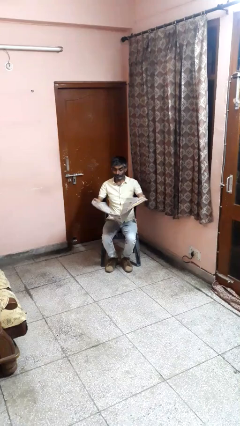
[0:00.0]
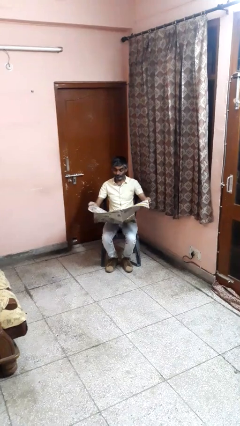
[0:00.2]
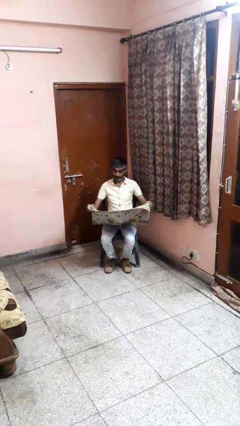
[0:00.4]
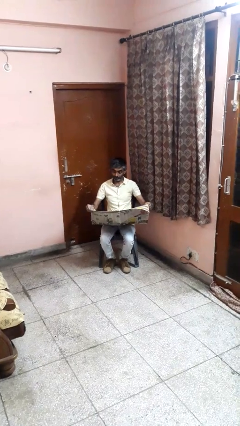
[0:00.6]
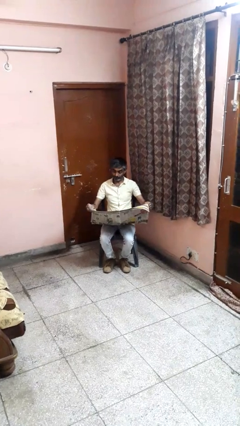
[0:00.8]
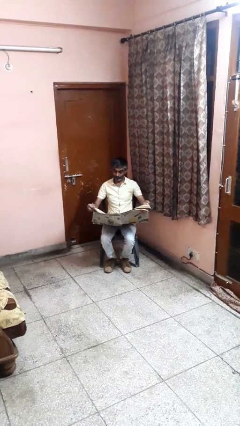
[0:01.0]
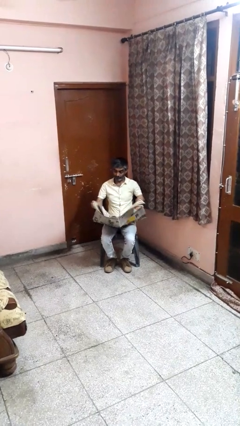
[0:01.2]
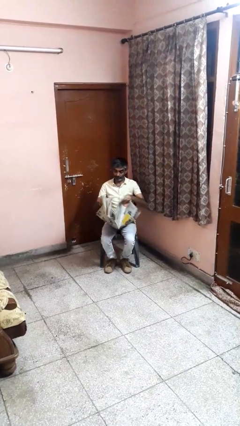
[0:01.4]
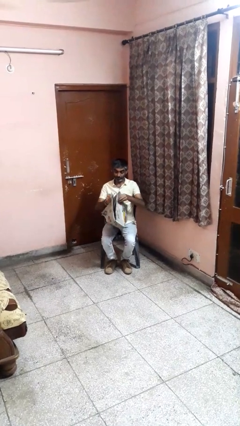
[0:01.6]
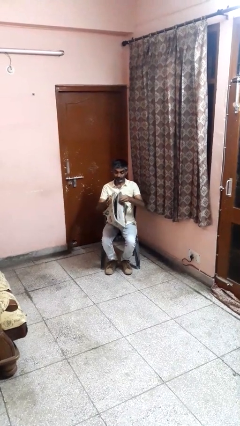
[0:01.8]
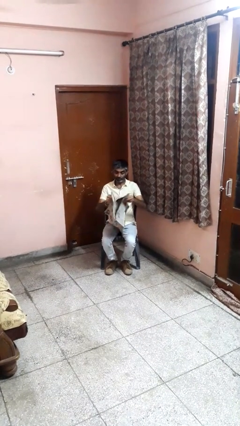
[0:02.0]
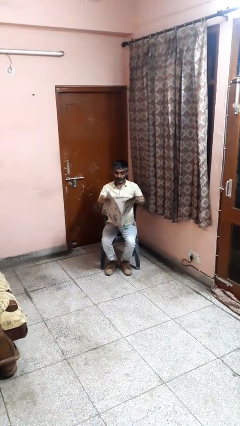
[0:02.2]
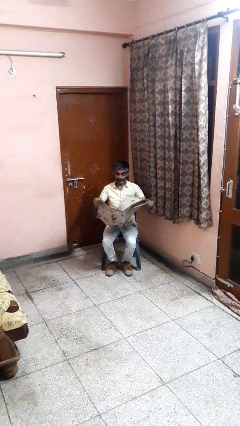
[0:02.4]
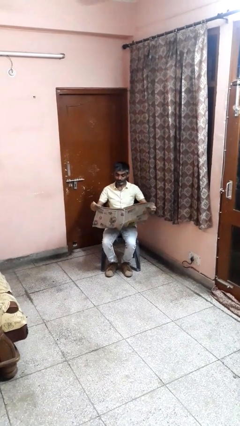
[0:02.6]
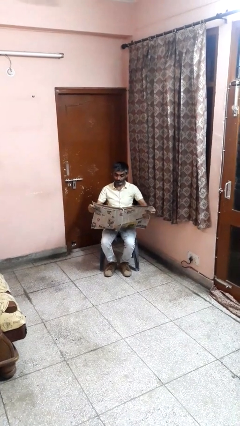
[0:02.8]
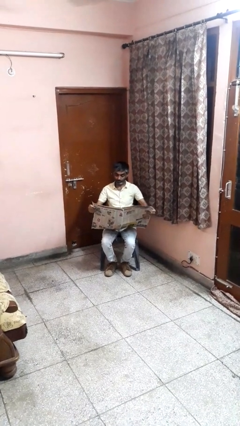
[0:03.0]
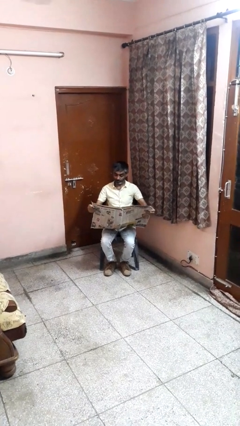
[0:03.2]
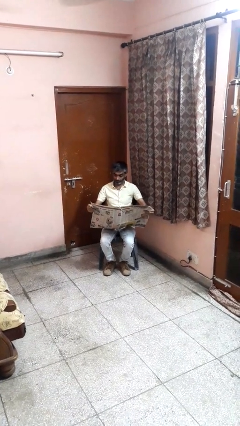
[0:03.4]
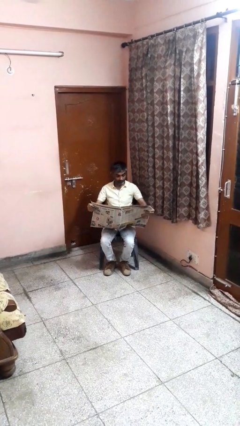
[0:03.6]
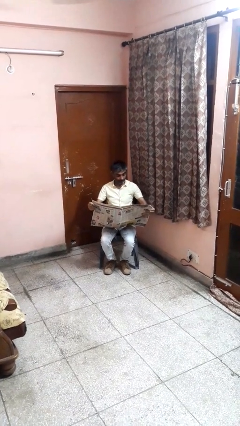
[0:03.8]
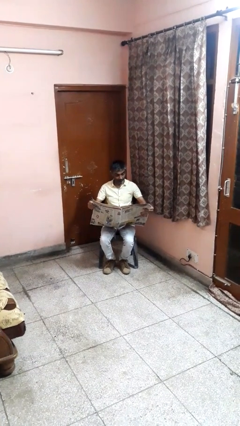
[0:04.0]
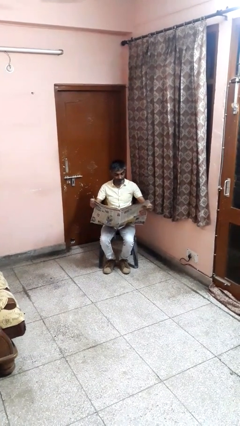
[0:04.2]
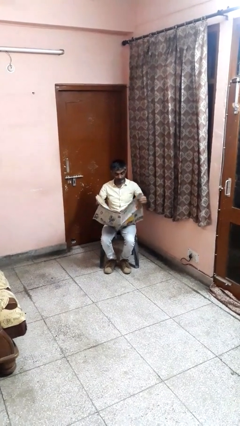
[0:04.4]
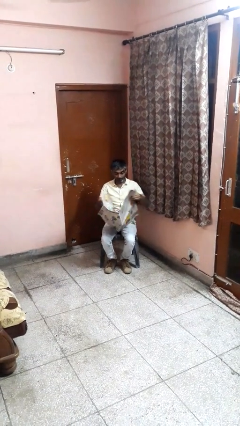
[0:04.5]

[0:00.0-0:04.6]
person reads newspaper

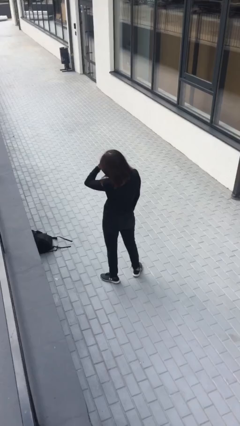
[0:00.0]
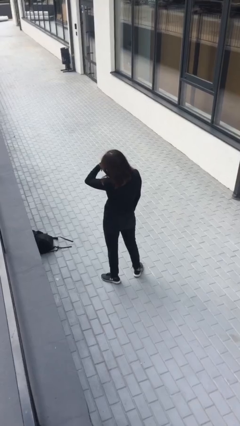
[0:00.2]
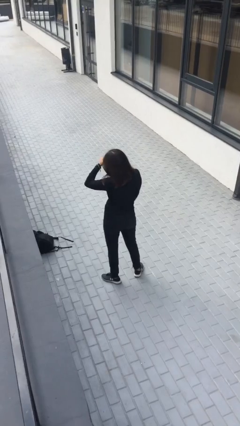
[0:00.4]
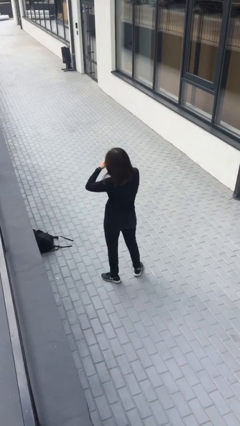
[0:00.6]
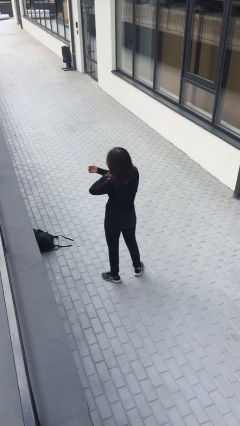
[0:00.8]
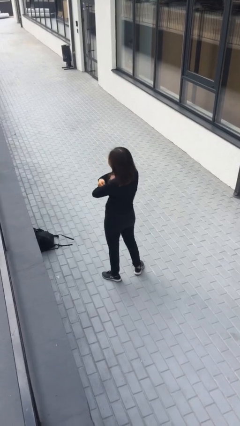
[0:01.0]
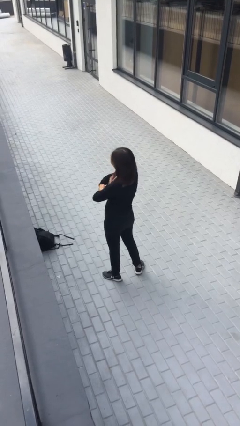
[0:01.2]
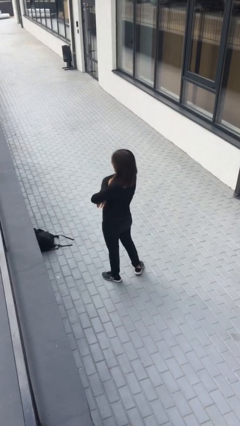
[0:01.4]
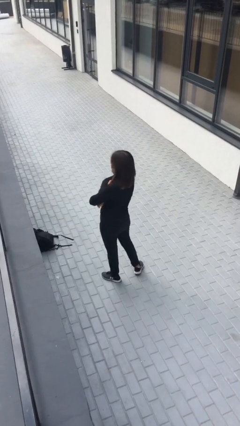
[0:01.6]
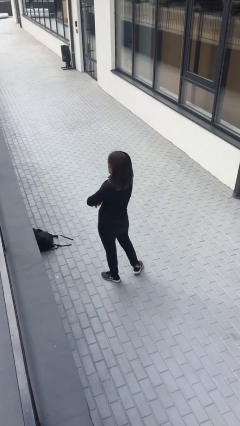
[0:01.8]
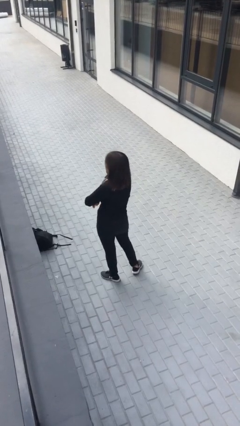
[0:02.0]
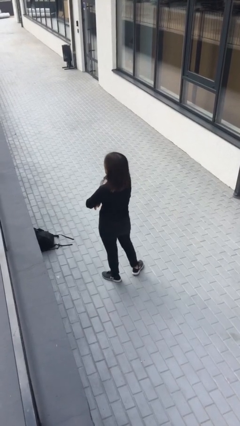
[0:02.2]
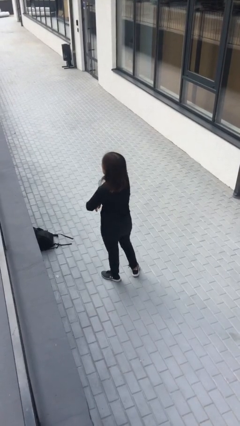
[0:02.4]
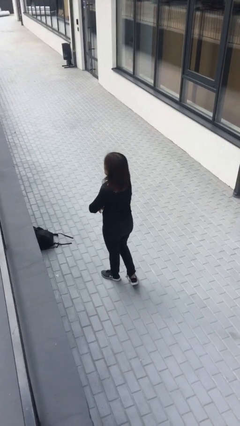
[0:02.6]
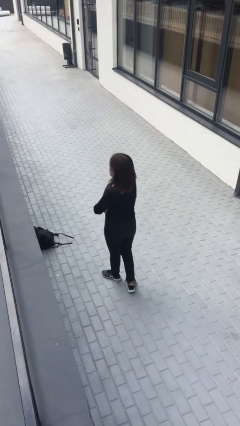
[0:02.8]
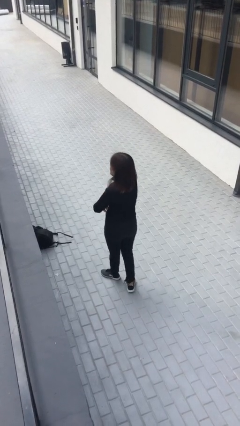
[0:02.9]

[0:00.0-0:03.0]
person crosses arms

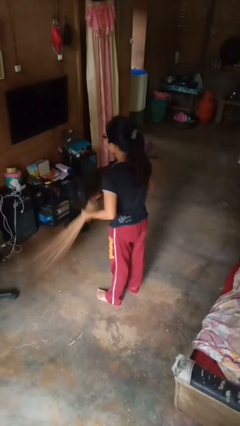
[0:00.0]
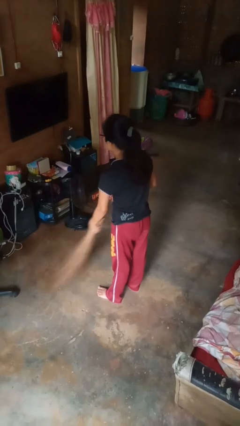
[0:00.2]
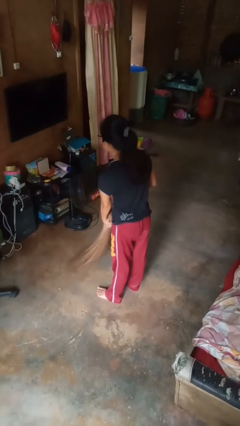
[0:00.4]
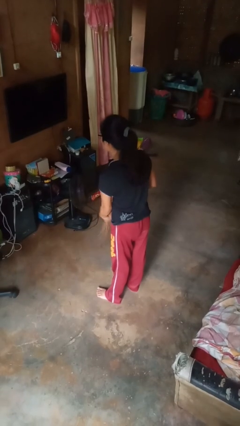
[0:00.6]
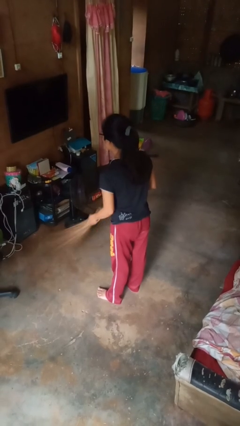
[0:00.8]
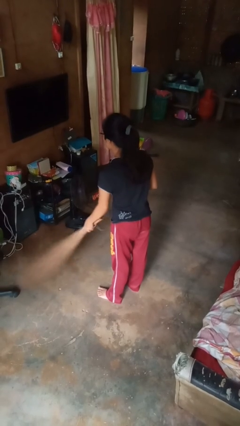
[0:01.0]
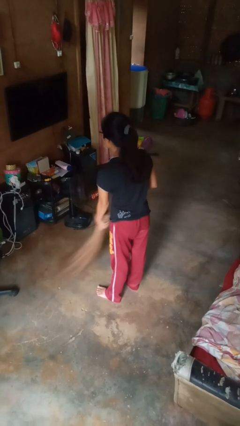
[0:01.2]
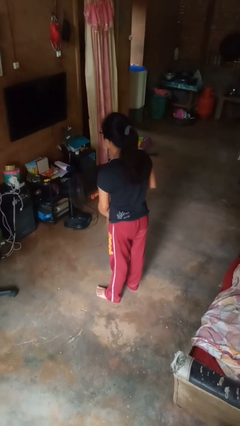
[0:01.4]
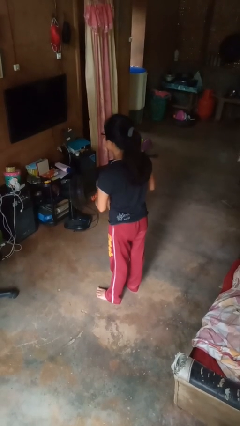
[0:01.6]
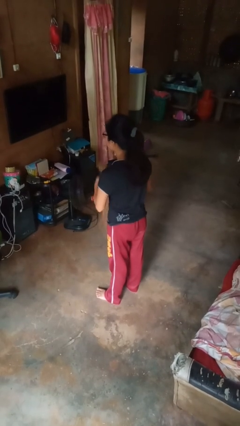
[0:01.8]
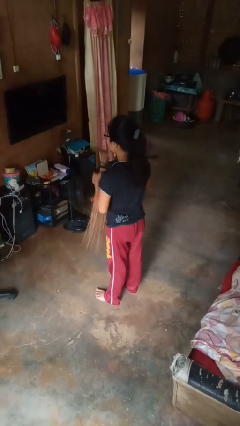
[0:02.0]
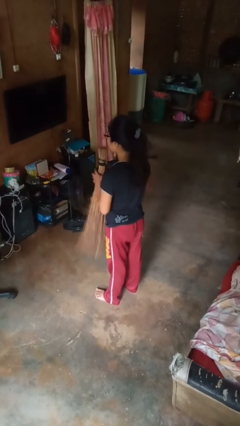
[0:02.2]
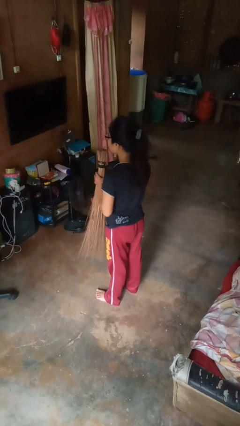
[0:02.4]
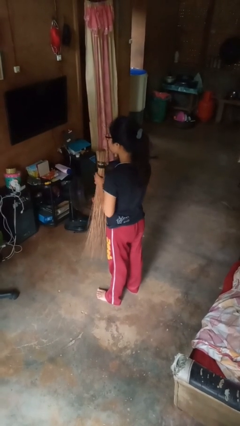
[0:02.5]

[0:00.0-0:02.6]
person sweeps floor

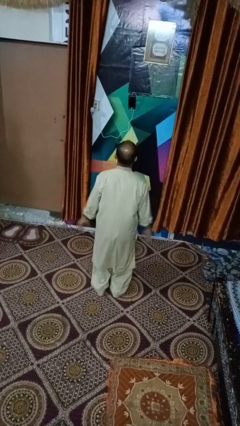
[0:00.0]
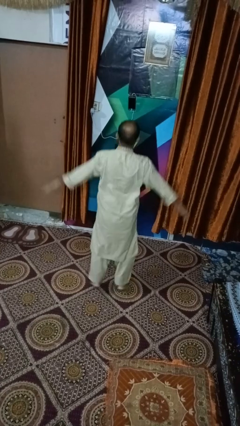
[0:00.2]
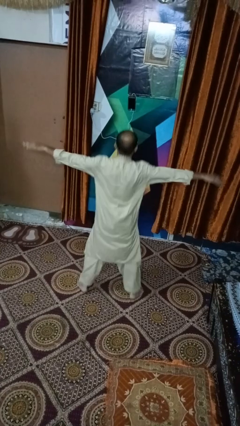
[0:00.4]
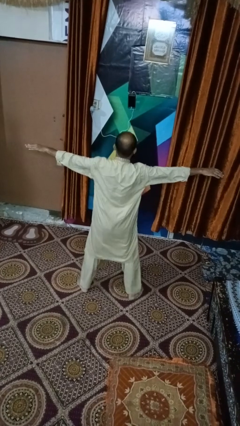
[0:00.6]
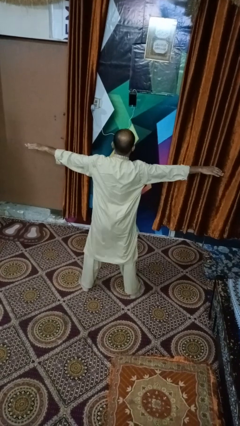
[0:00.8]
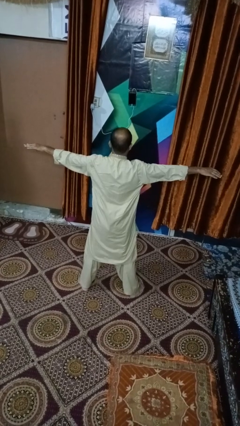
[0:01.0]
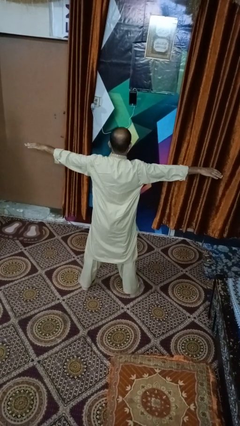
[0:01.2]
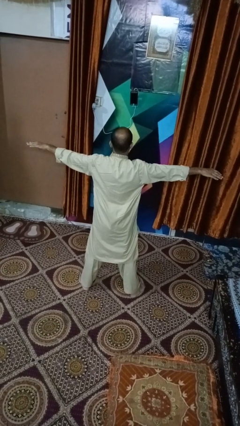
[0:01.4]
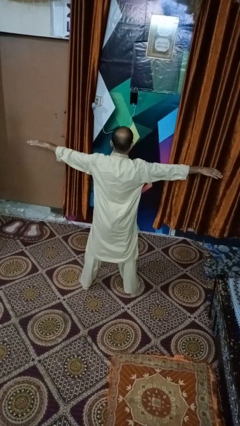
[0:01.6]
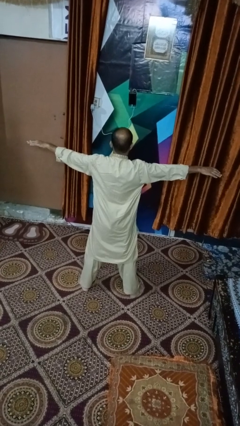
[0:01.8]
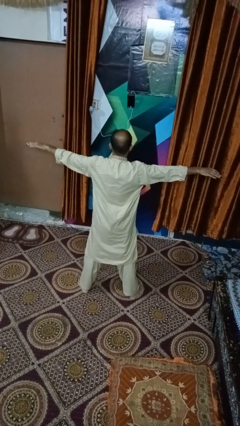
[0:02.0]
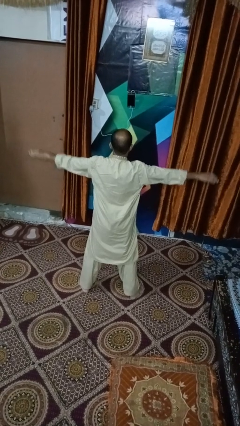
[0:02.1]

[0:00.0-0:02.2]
person exercises with jumping jacks

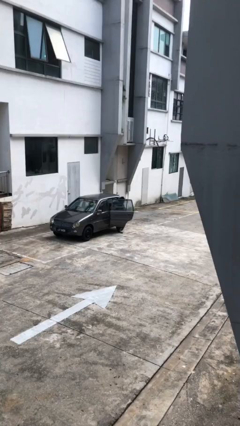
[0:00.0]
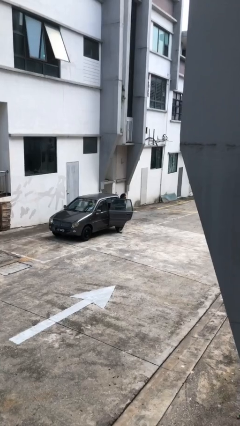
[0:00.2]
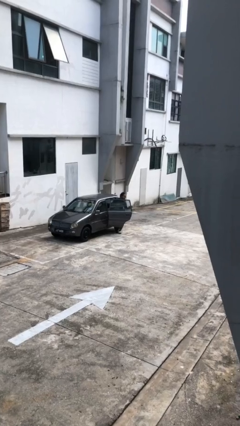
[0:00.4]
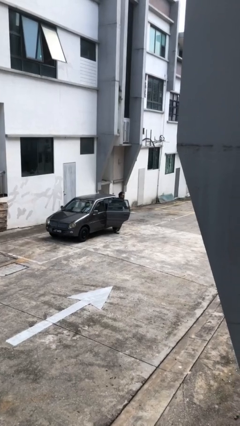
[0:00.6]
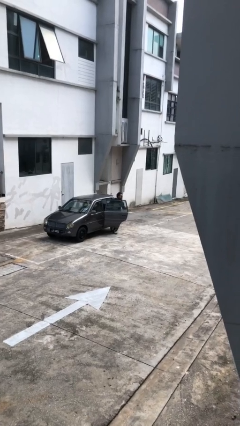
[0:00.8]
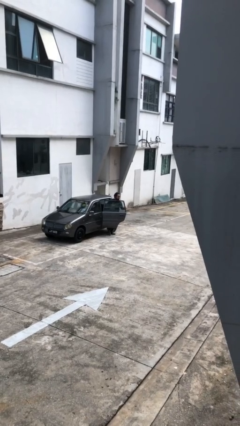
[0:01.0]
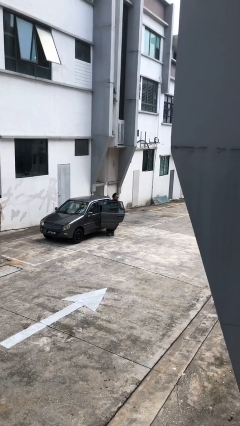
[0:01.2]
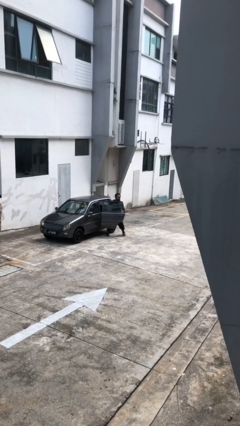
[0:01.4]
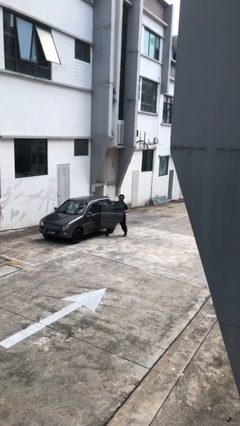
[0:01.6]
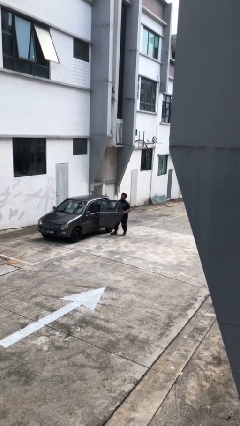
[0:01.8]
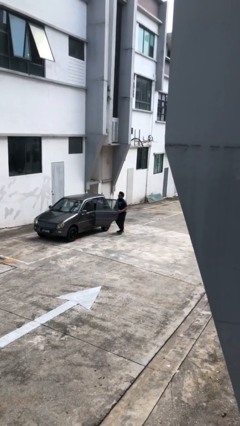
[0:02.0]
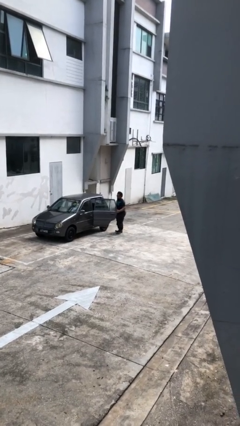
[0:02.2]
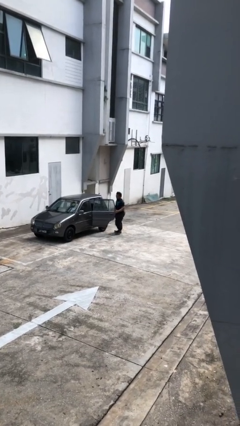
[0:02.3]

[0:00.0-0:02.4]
person exits car

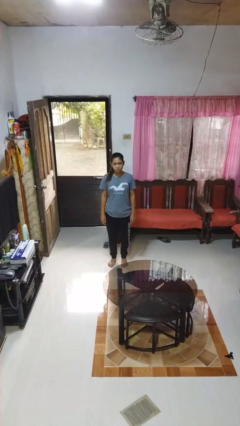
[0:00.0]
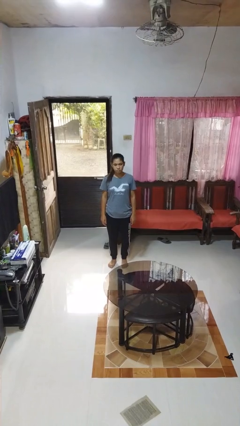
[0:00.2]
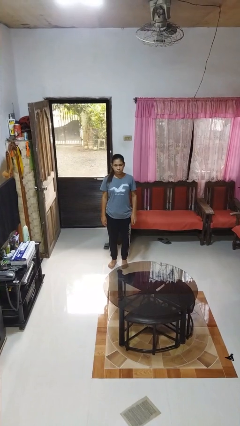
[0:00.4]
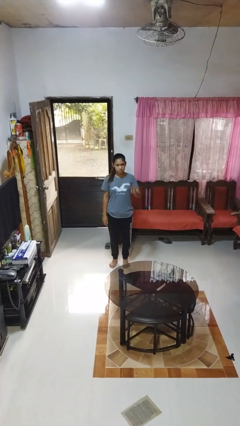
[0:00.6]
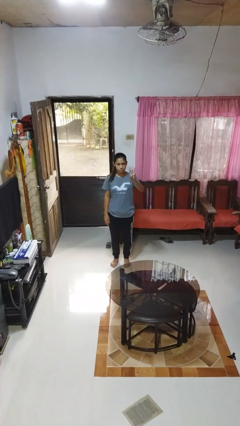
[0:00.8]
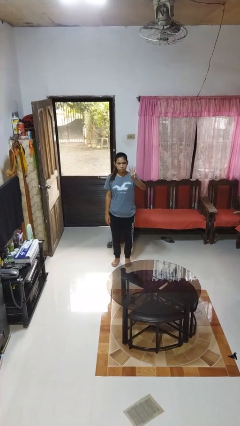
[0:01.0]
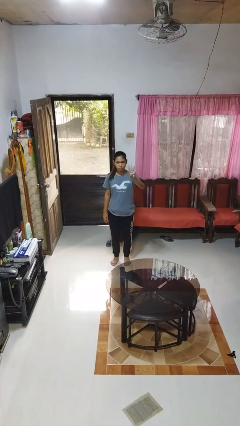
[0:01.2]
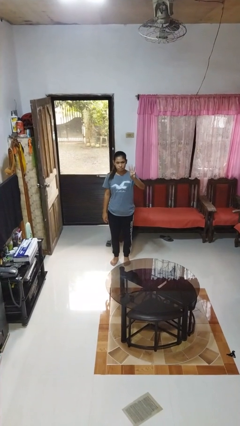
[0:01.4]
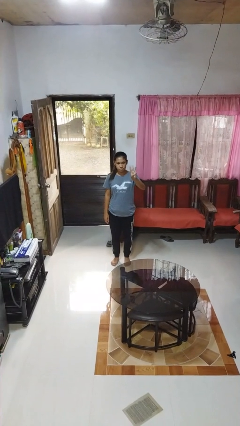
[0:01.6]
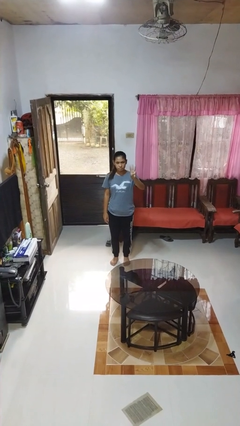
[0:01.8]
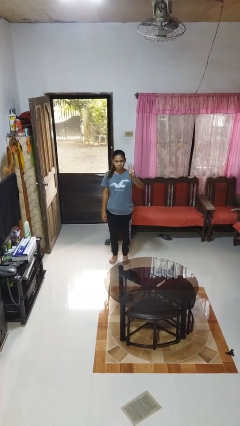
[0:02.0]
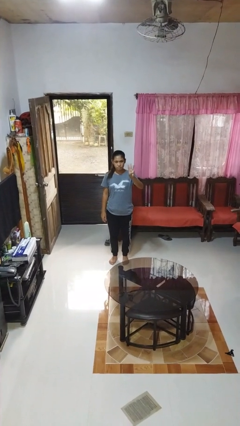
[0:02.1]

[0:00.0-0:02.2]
person gestures number three

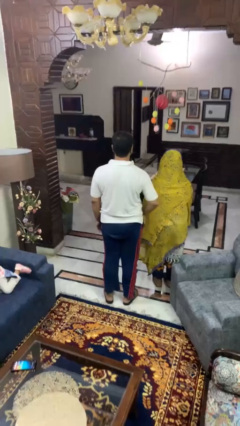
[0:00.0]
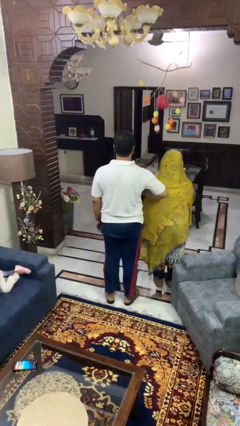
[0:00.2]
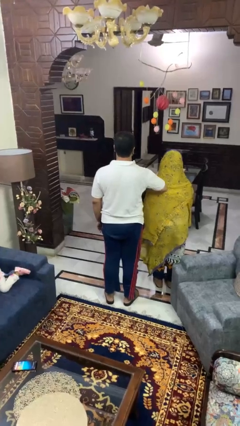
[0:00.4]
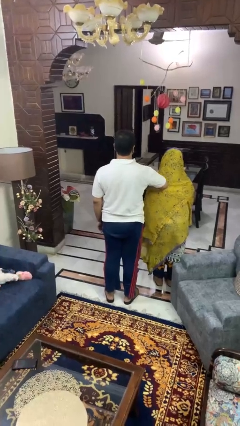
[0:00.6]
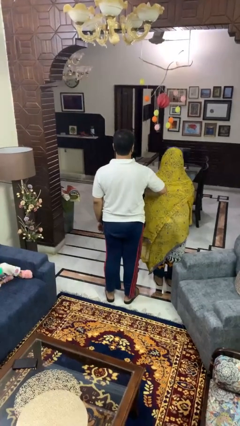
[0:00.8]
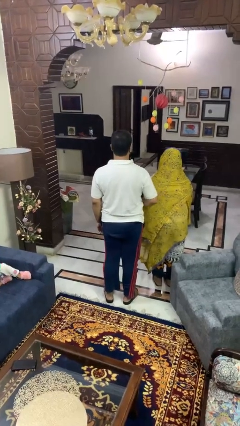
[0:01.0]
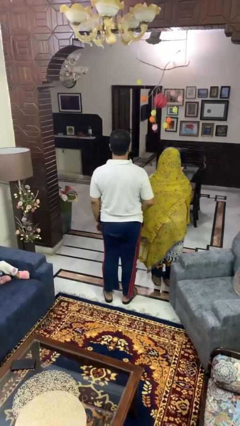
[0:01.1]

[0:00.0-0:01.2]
person nudges person with elbow
